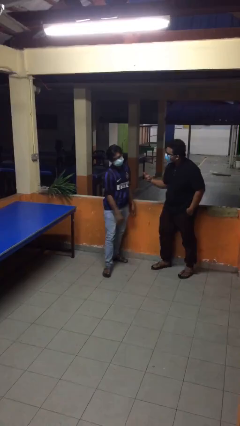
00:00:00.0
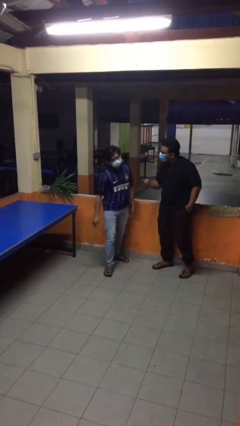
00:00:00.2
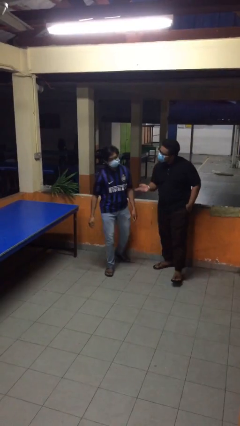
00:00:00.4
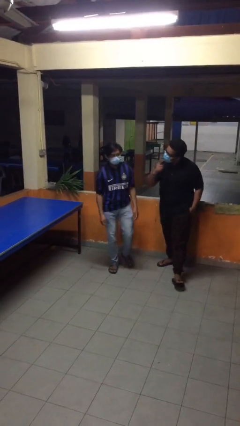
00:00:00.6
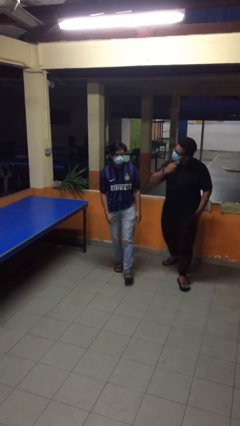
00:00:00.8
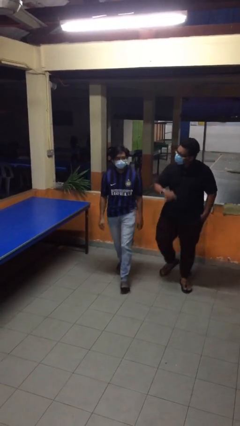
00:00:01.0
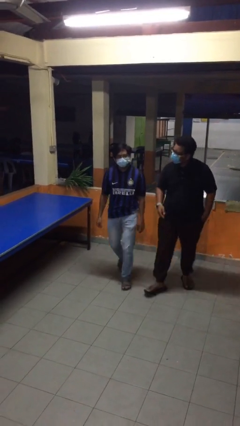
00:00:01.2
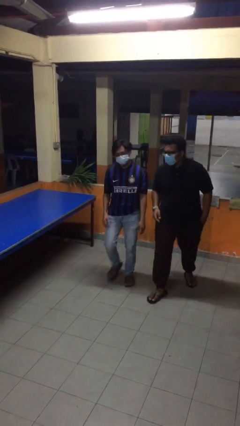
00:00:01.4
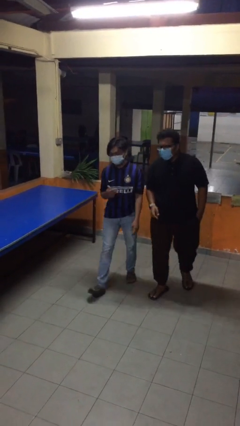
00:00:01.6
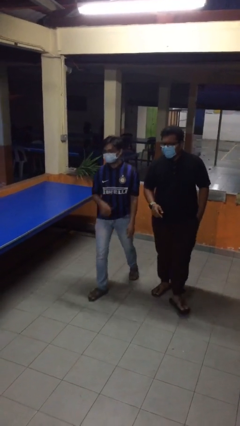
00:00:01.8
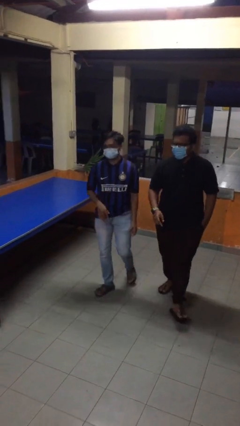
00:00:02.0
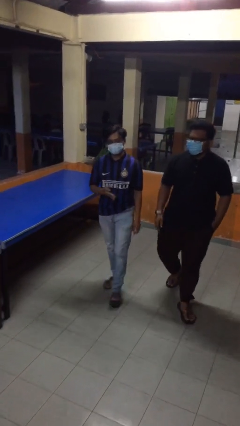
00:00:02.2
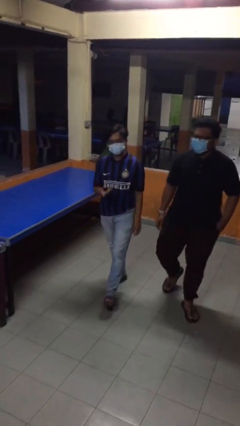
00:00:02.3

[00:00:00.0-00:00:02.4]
person talks to person

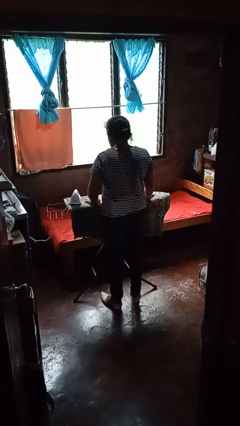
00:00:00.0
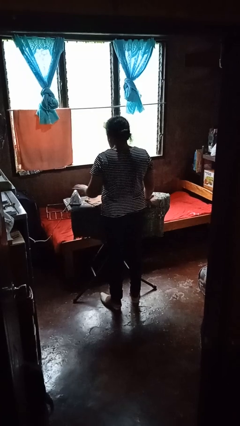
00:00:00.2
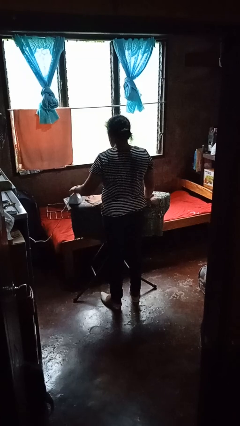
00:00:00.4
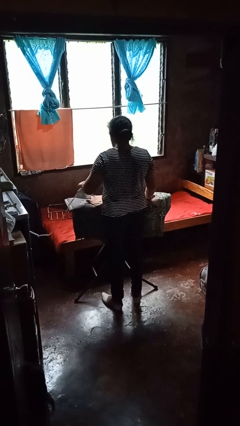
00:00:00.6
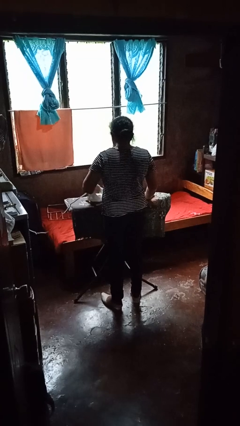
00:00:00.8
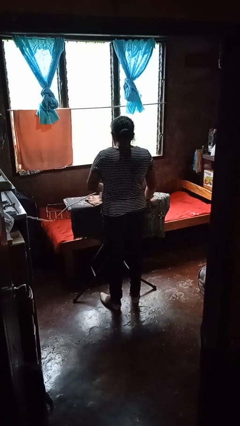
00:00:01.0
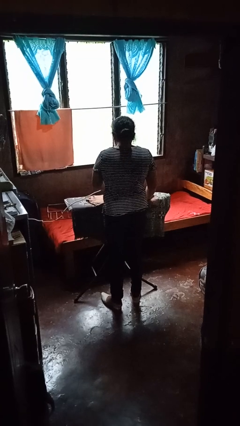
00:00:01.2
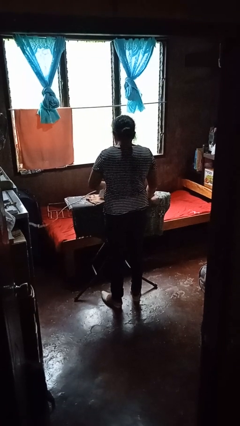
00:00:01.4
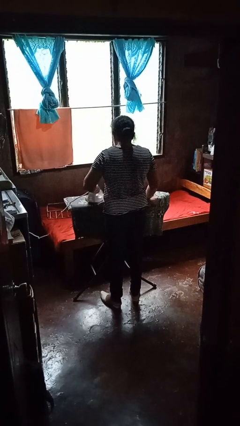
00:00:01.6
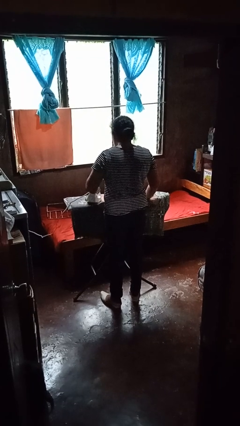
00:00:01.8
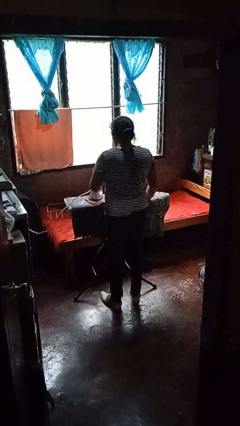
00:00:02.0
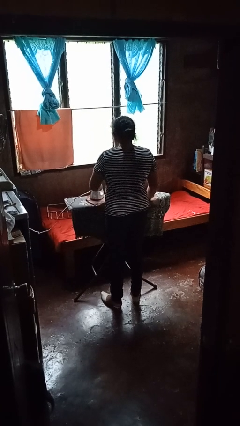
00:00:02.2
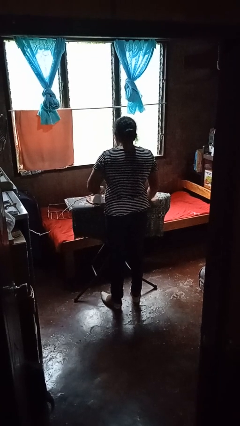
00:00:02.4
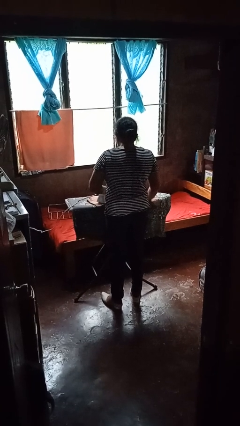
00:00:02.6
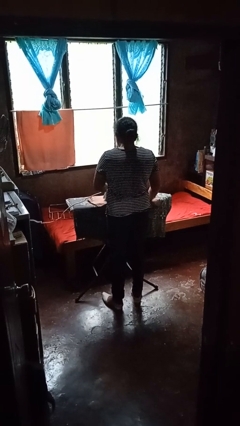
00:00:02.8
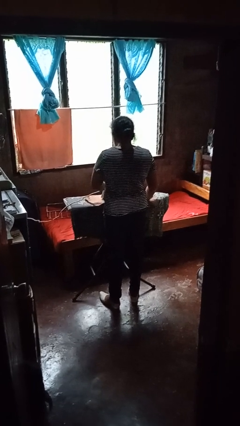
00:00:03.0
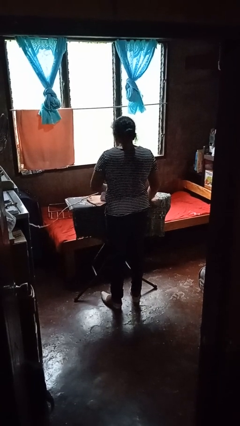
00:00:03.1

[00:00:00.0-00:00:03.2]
person irons clothes

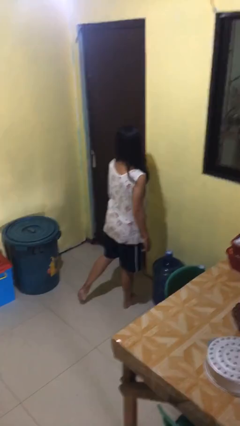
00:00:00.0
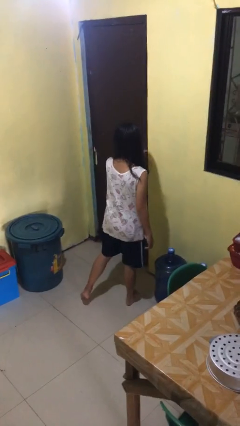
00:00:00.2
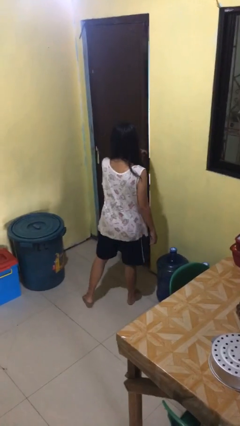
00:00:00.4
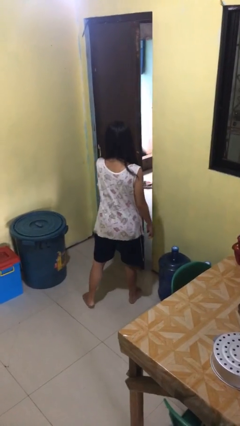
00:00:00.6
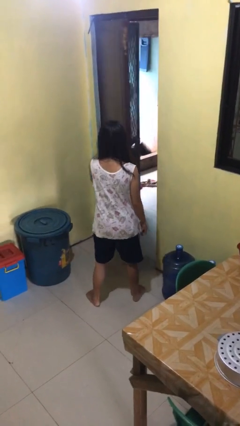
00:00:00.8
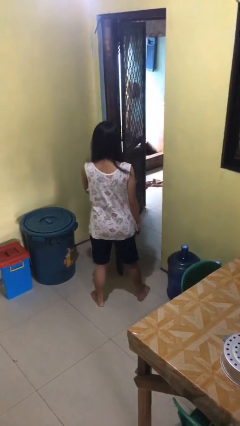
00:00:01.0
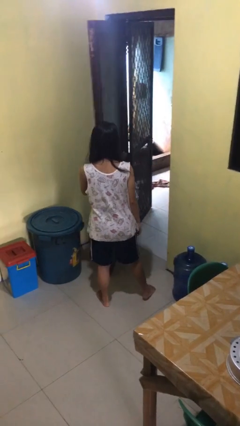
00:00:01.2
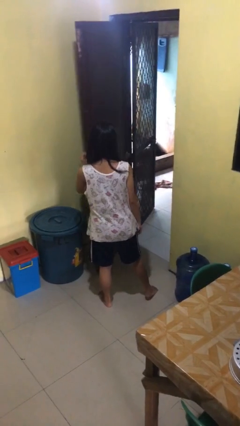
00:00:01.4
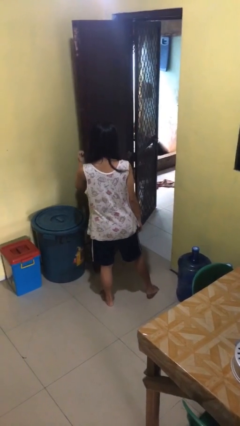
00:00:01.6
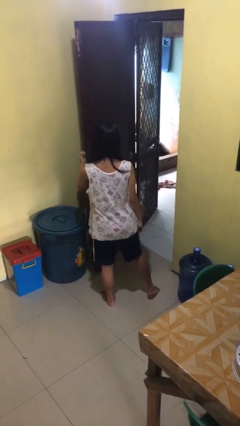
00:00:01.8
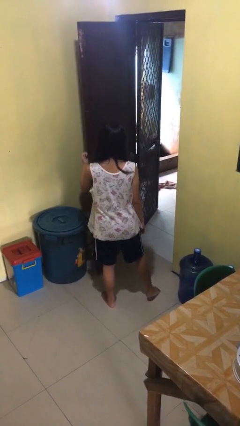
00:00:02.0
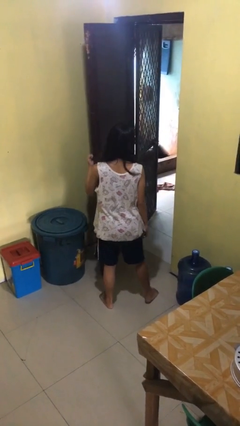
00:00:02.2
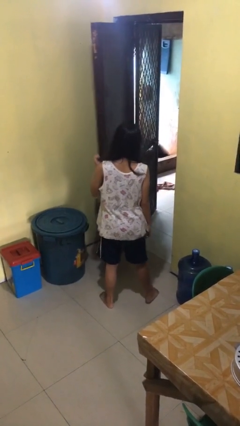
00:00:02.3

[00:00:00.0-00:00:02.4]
person opens facility door

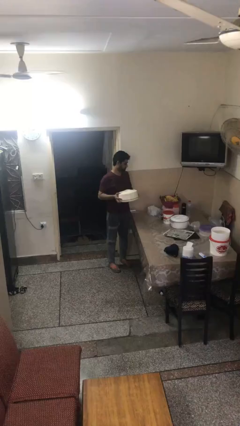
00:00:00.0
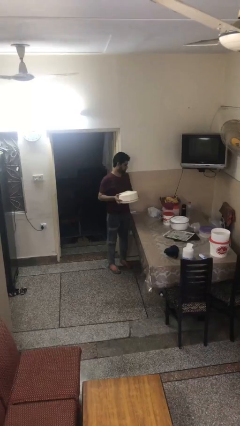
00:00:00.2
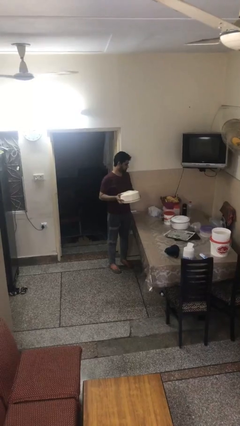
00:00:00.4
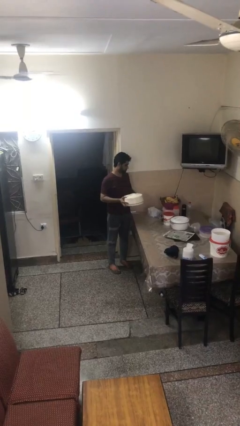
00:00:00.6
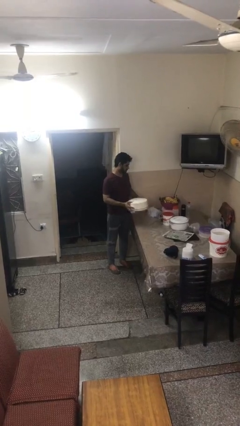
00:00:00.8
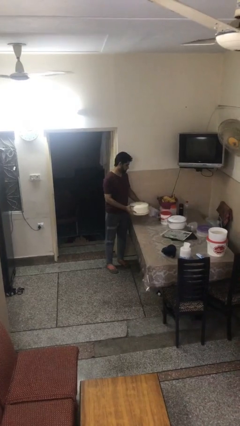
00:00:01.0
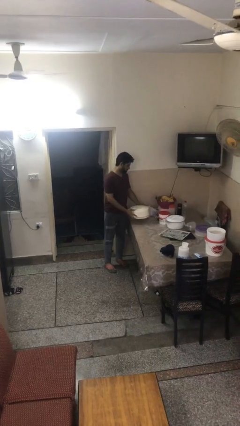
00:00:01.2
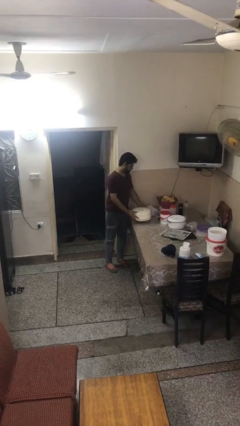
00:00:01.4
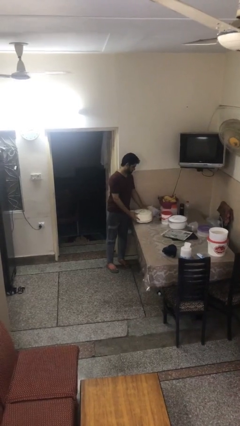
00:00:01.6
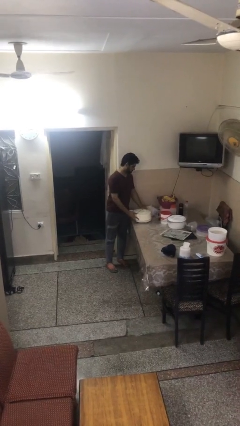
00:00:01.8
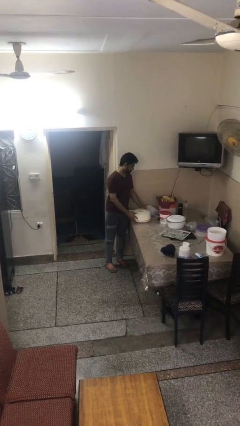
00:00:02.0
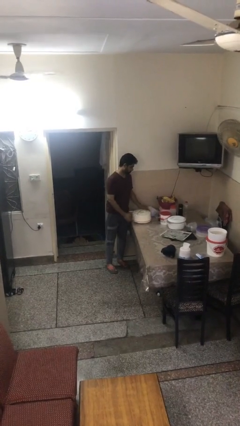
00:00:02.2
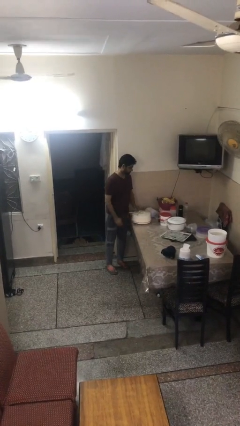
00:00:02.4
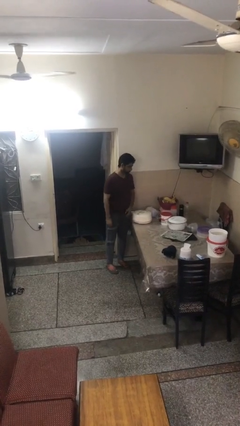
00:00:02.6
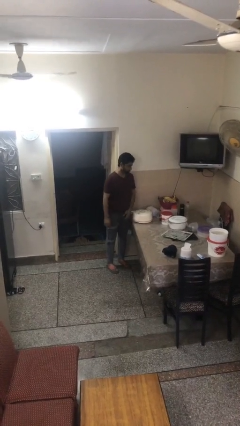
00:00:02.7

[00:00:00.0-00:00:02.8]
person puts down object on table

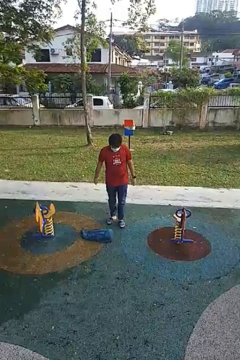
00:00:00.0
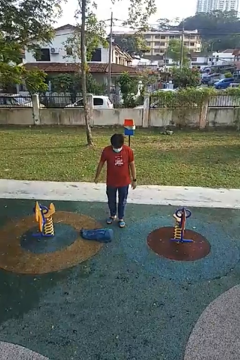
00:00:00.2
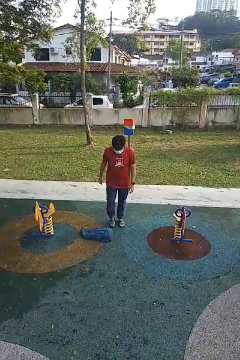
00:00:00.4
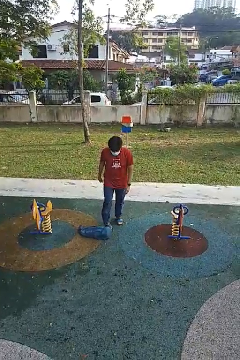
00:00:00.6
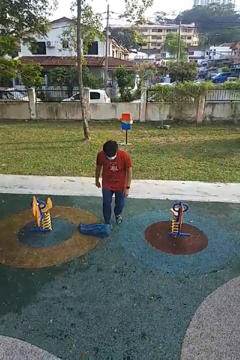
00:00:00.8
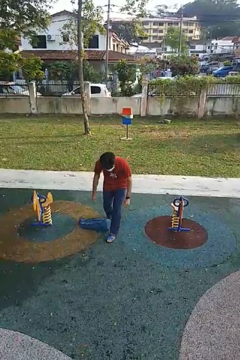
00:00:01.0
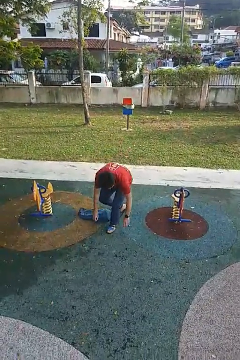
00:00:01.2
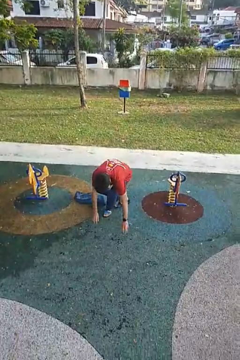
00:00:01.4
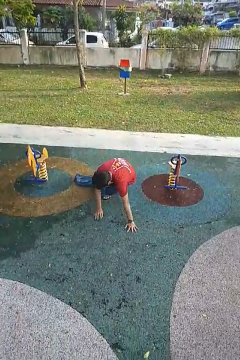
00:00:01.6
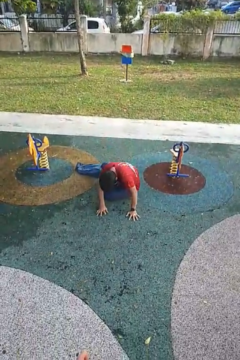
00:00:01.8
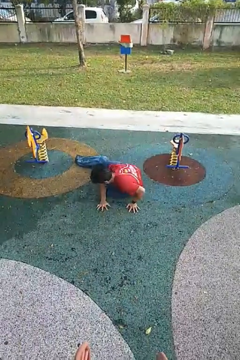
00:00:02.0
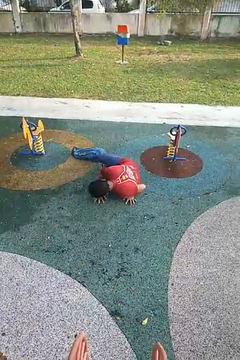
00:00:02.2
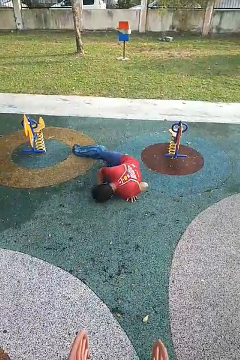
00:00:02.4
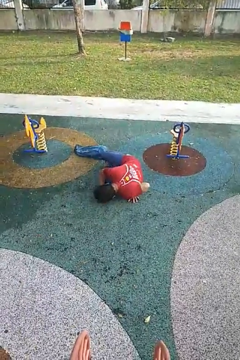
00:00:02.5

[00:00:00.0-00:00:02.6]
person trips on object on floor

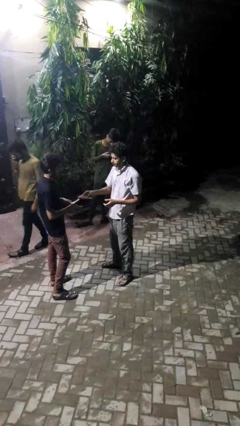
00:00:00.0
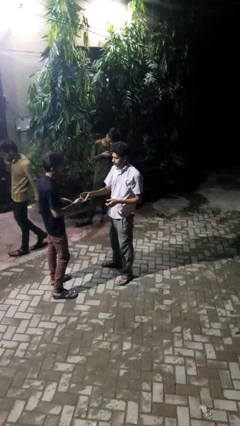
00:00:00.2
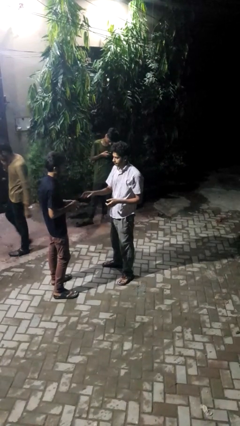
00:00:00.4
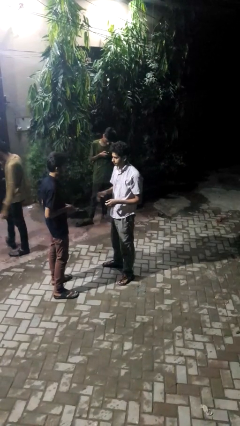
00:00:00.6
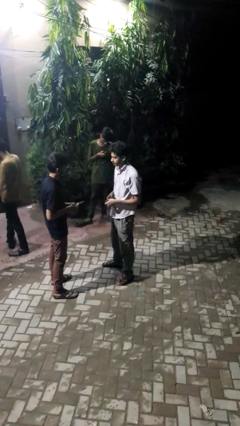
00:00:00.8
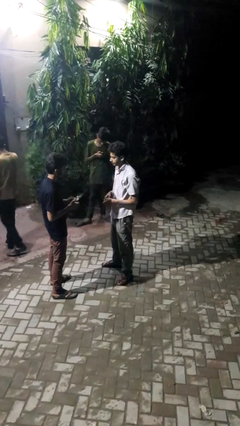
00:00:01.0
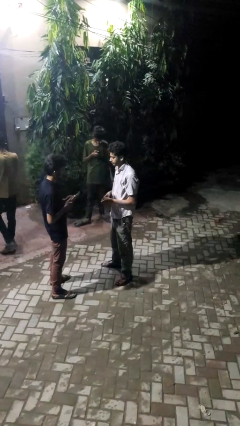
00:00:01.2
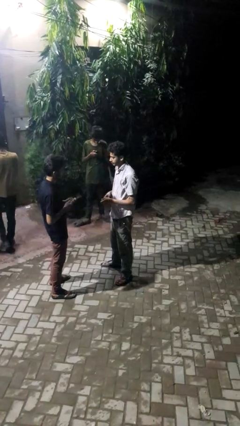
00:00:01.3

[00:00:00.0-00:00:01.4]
person transfers object to person

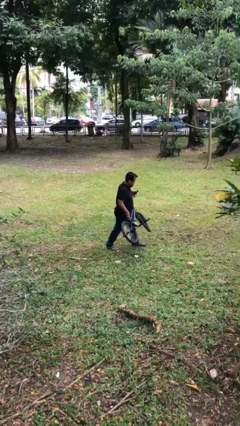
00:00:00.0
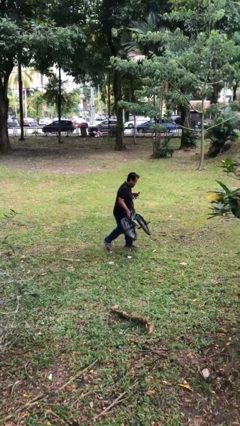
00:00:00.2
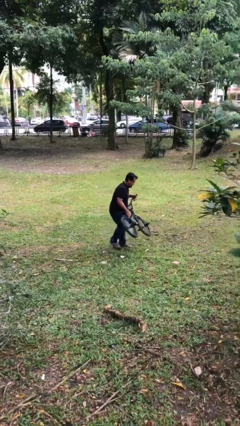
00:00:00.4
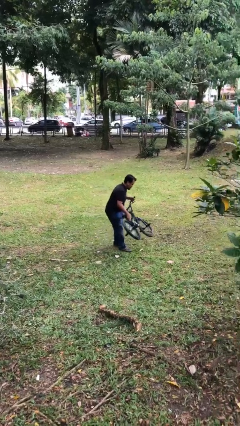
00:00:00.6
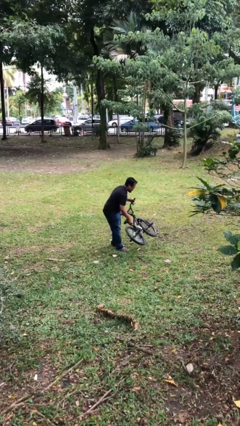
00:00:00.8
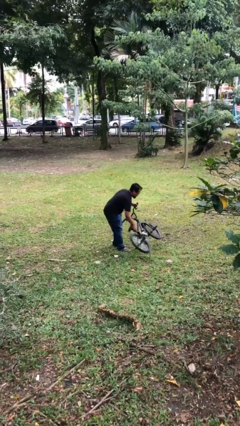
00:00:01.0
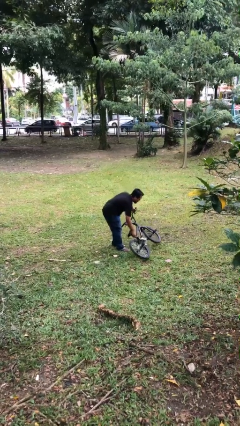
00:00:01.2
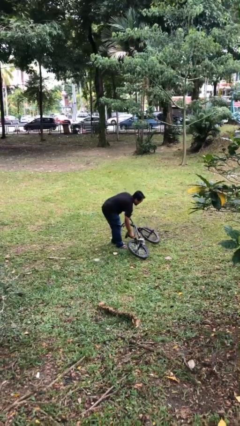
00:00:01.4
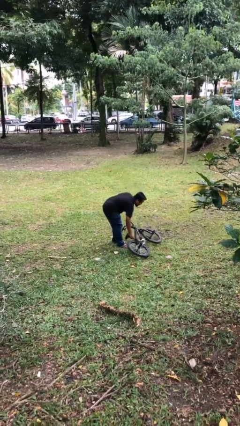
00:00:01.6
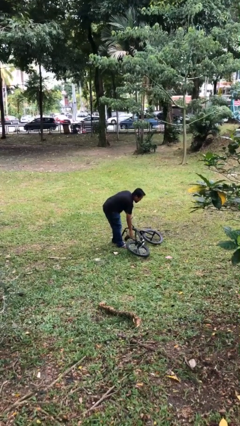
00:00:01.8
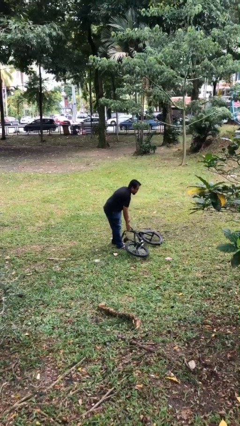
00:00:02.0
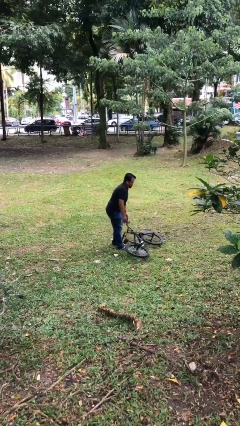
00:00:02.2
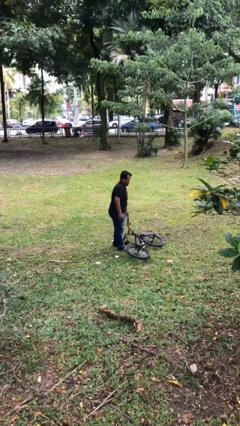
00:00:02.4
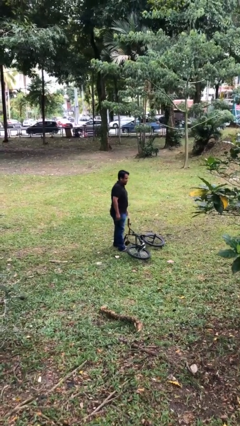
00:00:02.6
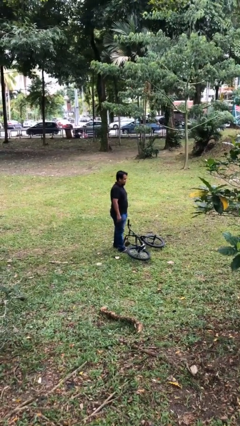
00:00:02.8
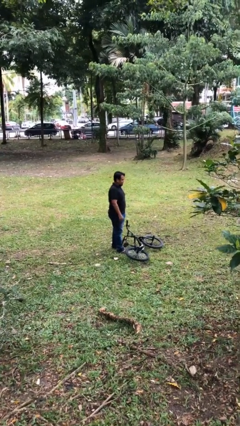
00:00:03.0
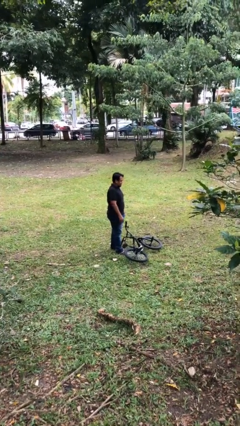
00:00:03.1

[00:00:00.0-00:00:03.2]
person puts down object on floor
